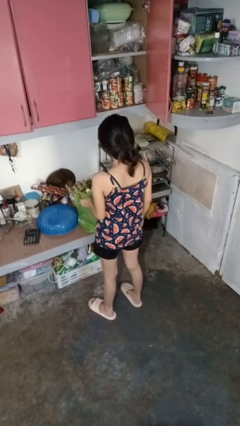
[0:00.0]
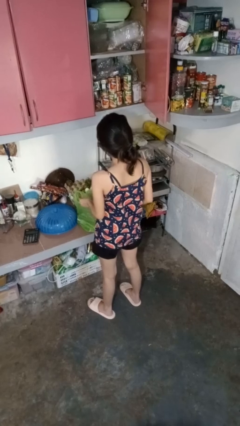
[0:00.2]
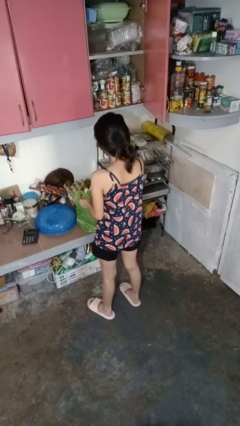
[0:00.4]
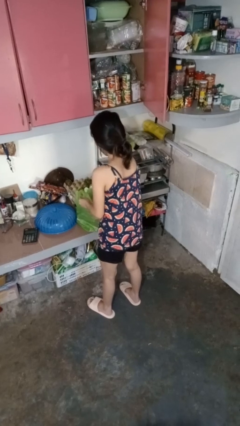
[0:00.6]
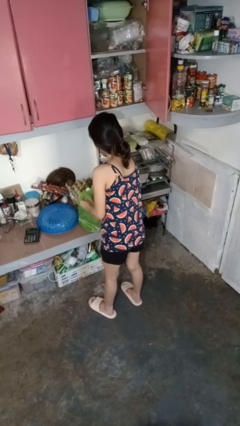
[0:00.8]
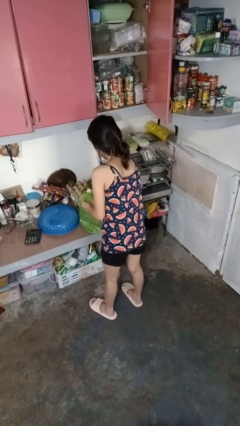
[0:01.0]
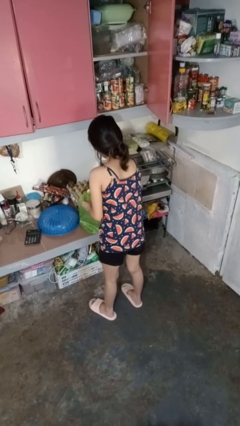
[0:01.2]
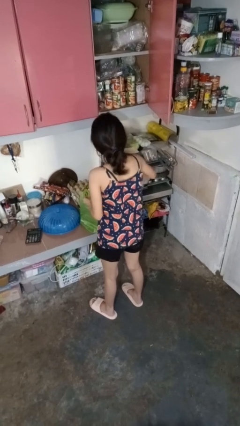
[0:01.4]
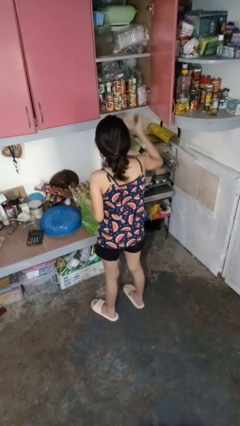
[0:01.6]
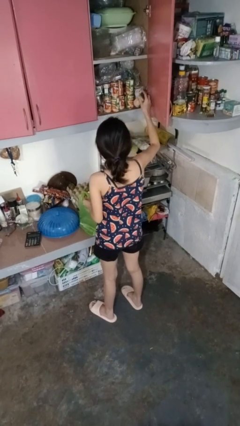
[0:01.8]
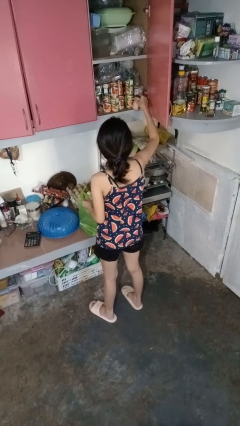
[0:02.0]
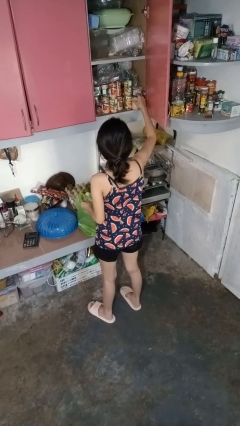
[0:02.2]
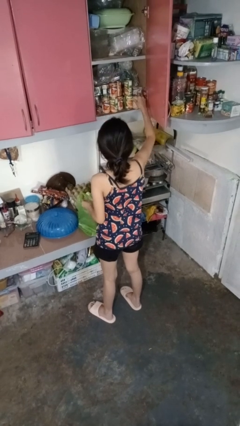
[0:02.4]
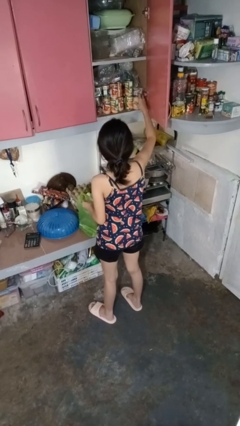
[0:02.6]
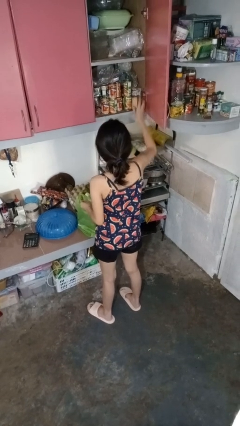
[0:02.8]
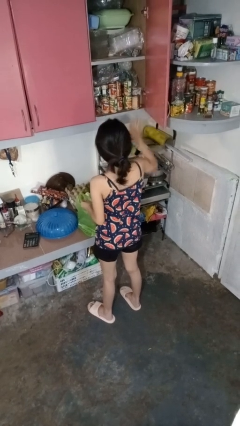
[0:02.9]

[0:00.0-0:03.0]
person loads groceries into cabinet

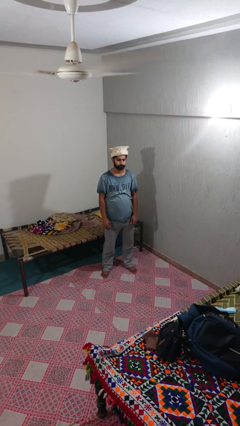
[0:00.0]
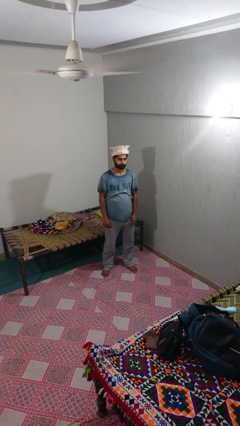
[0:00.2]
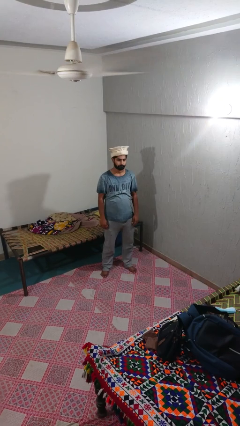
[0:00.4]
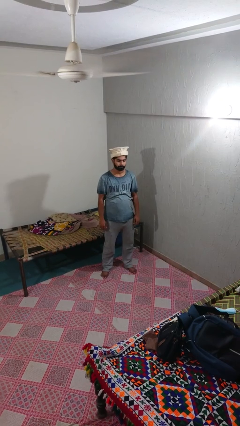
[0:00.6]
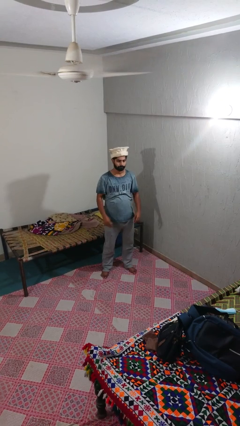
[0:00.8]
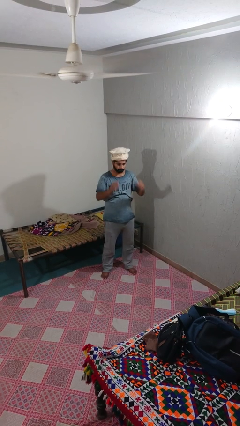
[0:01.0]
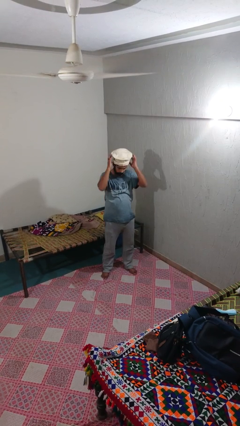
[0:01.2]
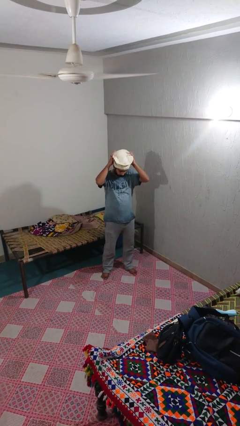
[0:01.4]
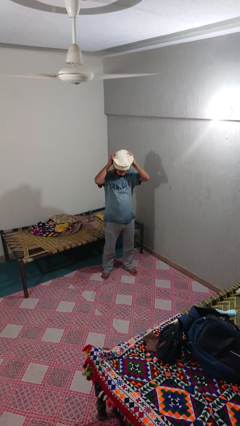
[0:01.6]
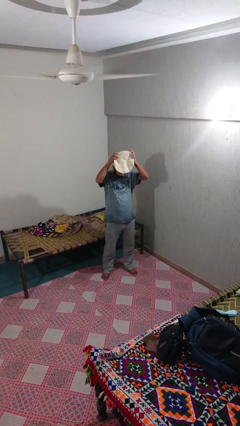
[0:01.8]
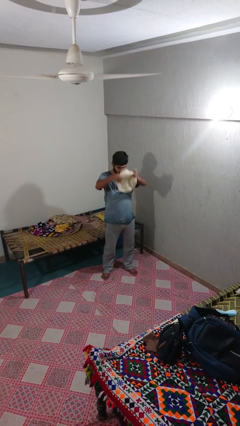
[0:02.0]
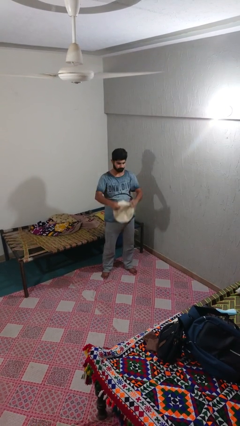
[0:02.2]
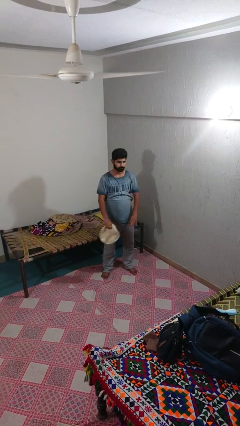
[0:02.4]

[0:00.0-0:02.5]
person takes off hat

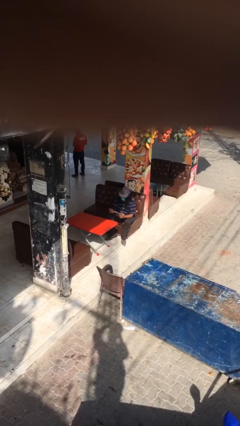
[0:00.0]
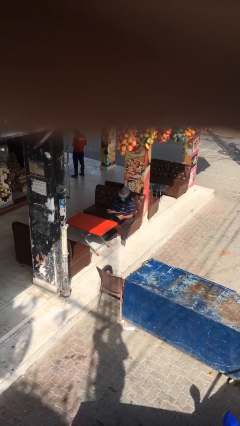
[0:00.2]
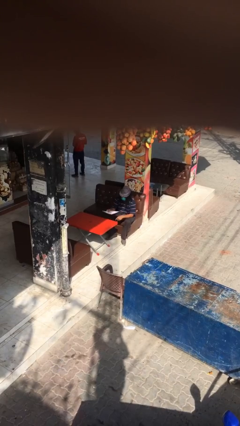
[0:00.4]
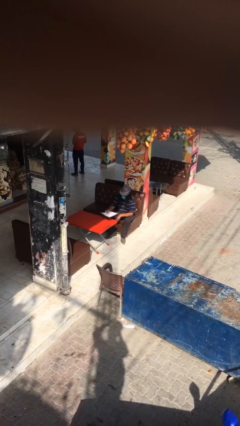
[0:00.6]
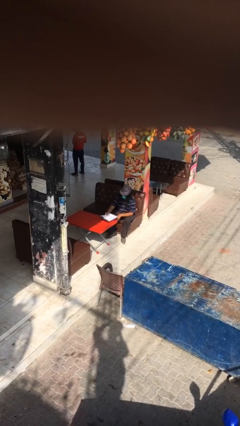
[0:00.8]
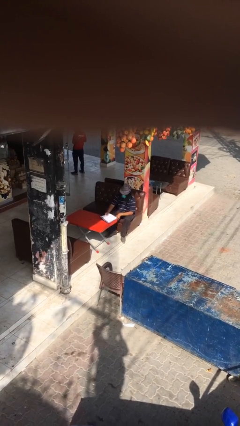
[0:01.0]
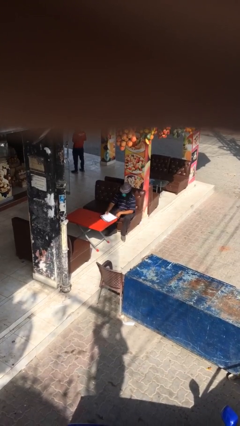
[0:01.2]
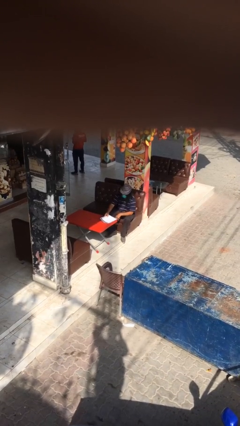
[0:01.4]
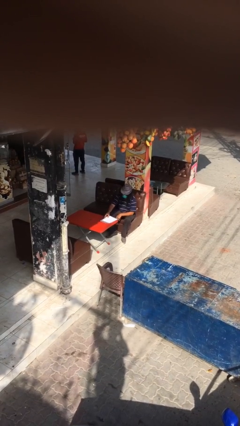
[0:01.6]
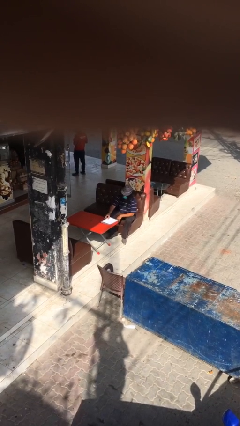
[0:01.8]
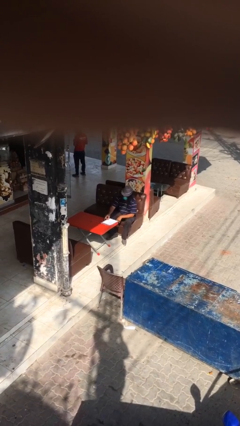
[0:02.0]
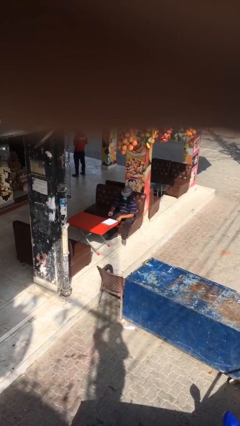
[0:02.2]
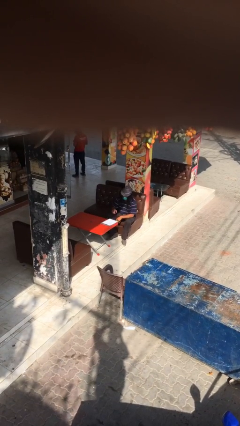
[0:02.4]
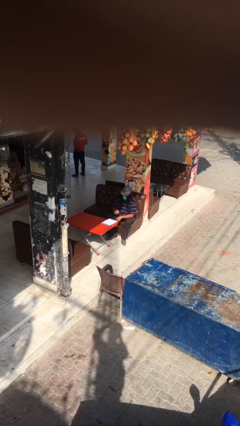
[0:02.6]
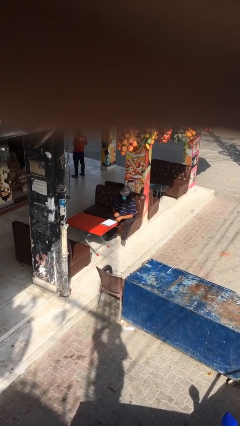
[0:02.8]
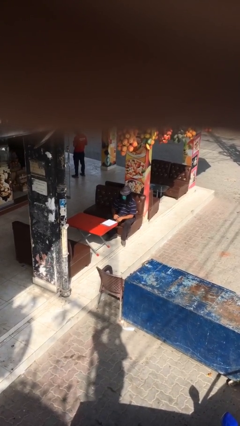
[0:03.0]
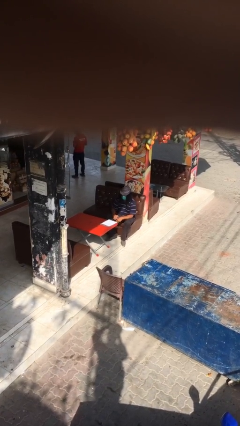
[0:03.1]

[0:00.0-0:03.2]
person puts down object on table

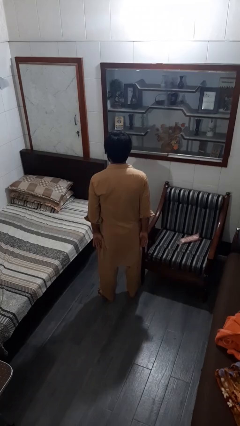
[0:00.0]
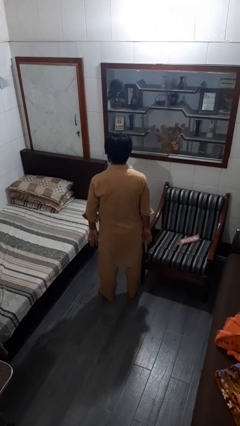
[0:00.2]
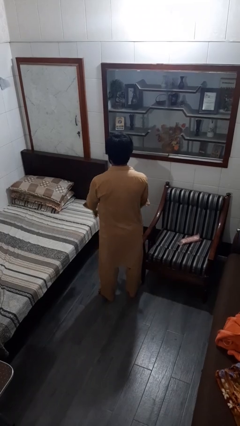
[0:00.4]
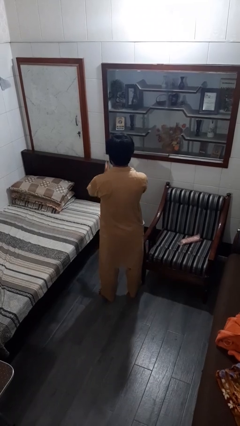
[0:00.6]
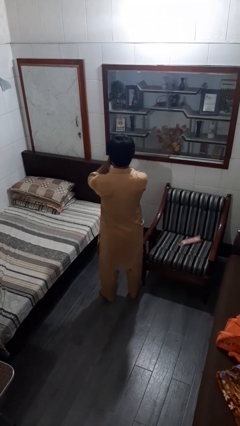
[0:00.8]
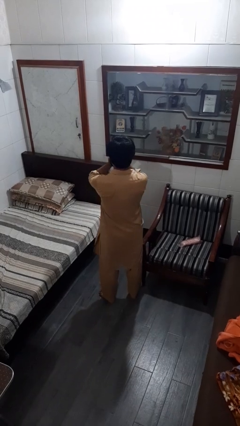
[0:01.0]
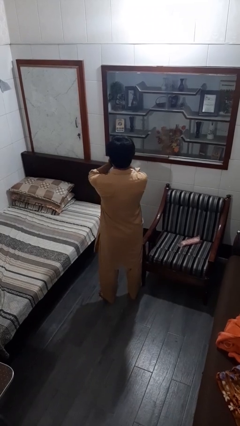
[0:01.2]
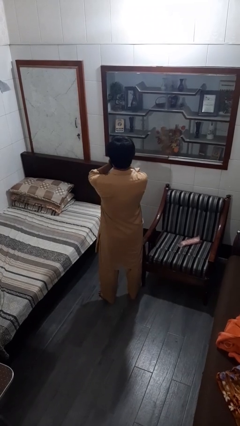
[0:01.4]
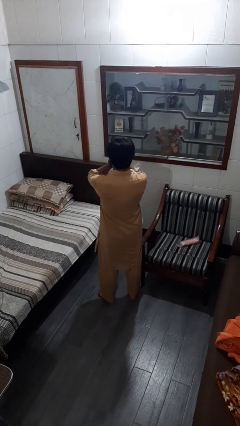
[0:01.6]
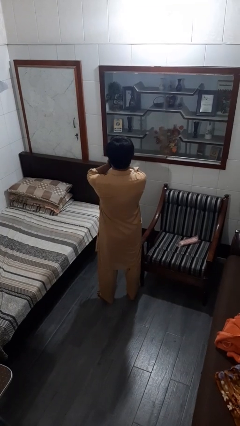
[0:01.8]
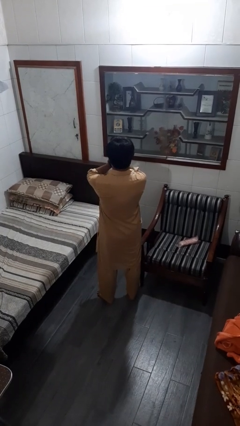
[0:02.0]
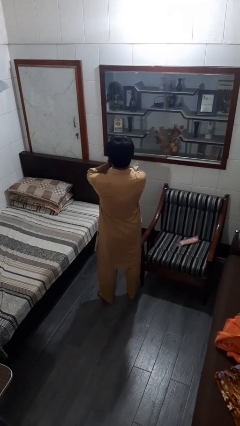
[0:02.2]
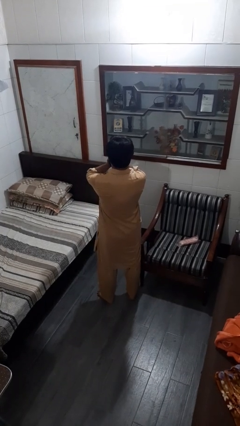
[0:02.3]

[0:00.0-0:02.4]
person covers face with hands

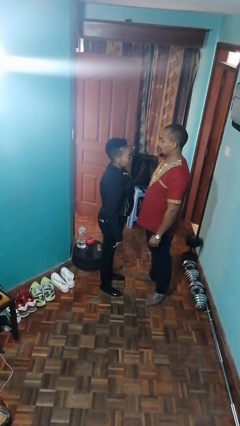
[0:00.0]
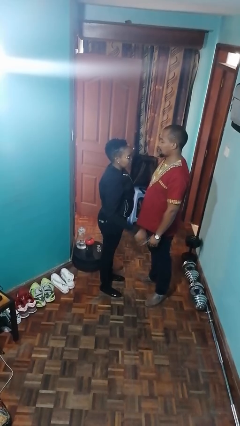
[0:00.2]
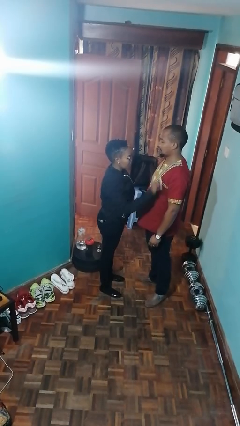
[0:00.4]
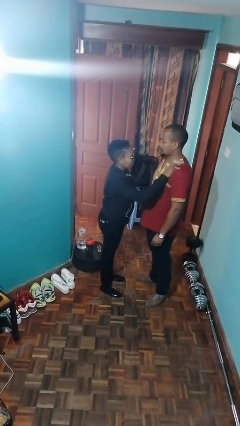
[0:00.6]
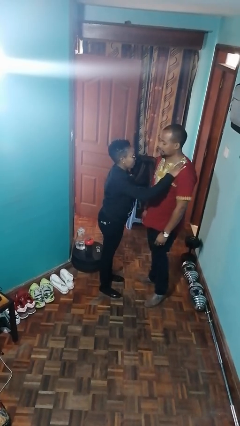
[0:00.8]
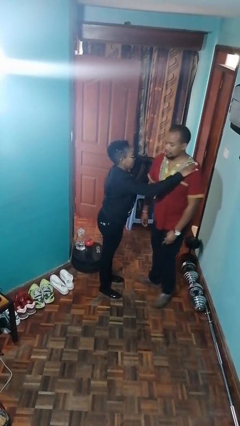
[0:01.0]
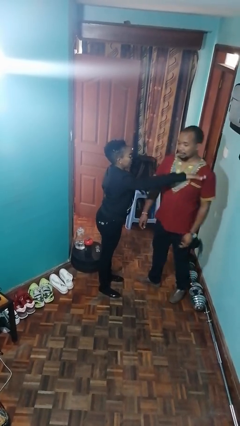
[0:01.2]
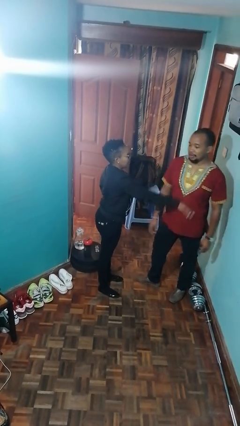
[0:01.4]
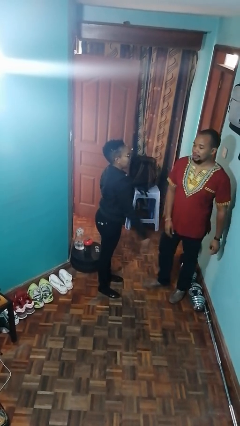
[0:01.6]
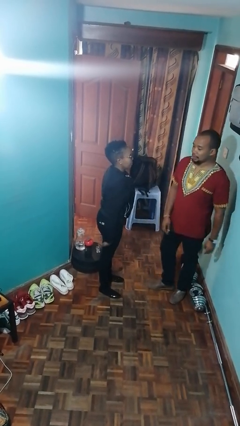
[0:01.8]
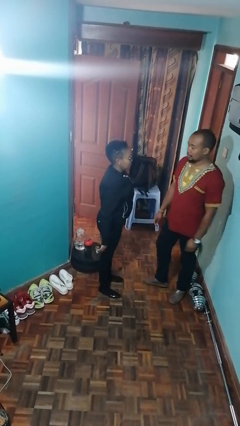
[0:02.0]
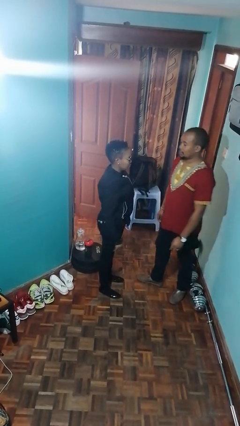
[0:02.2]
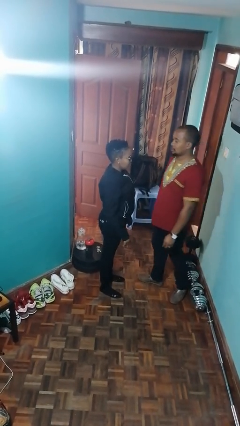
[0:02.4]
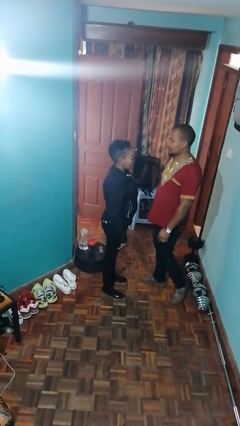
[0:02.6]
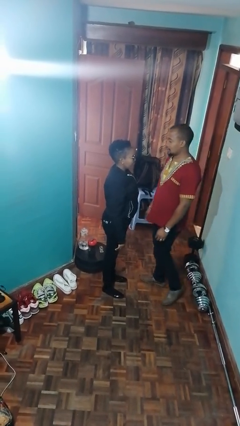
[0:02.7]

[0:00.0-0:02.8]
person shoves person

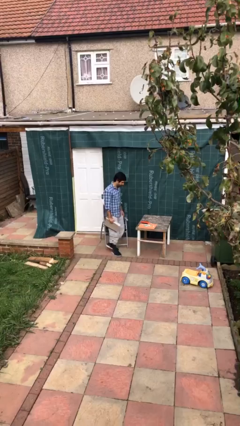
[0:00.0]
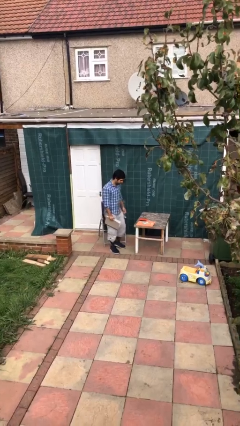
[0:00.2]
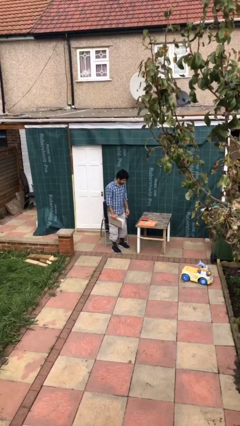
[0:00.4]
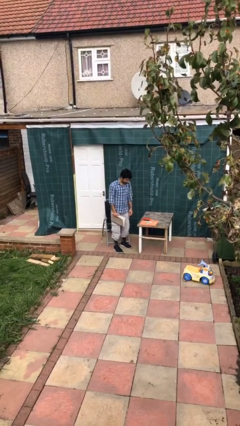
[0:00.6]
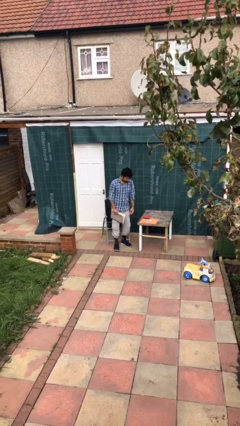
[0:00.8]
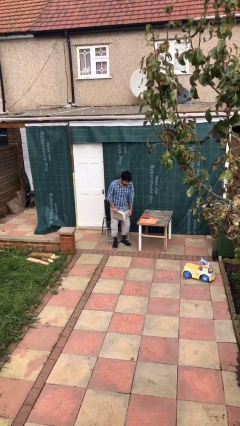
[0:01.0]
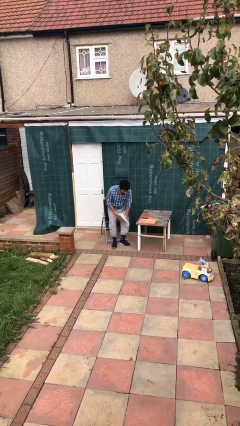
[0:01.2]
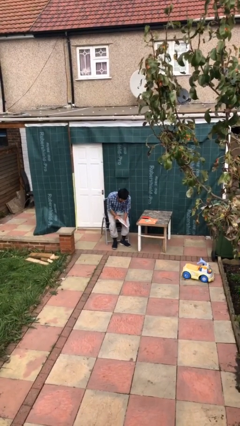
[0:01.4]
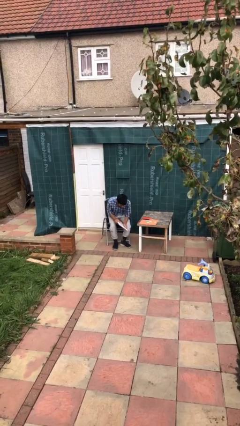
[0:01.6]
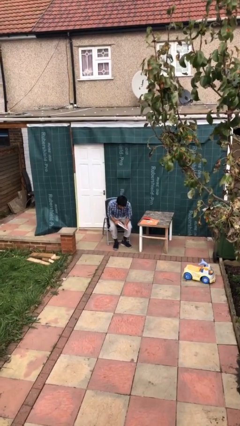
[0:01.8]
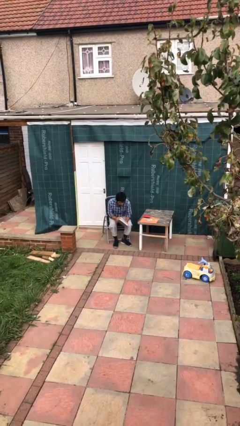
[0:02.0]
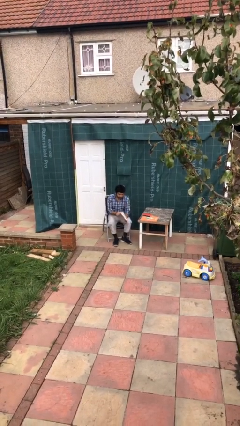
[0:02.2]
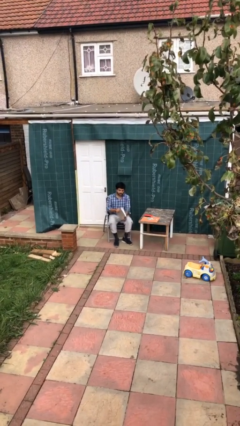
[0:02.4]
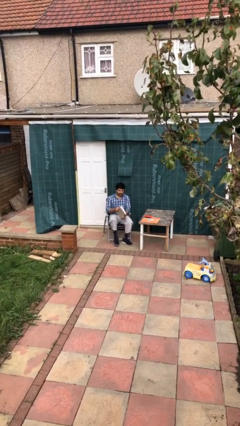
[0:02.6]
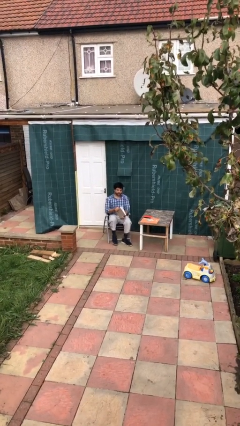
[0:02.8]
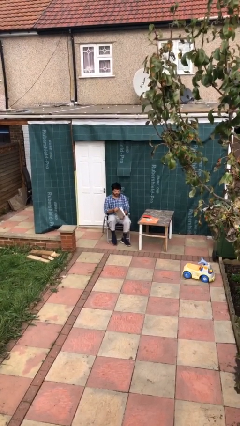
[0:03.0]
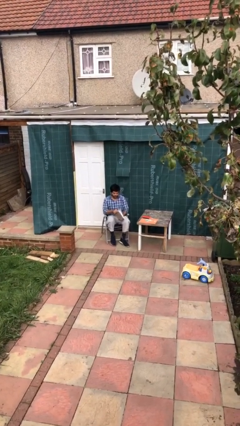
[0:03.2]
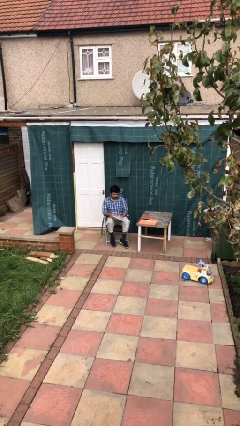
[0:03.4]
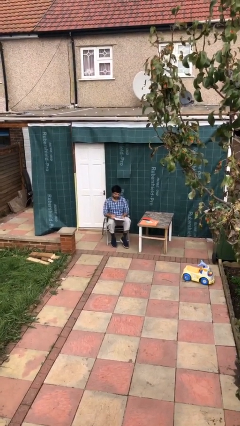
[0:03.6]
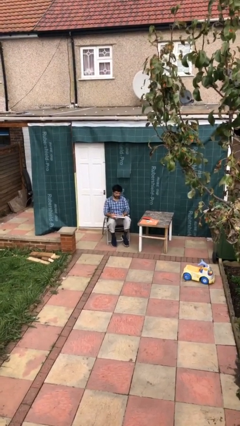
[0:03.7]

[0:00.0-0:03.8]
person sits down

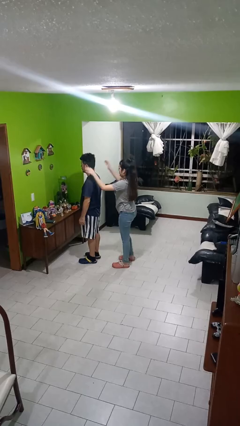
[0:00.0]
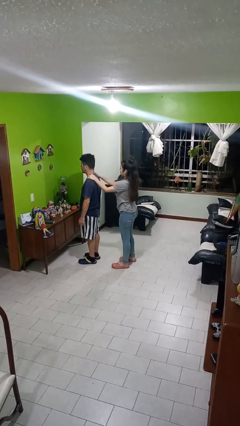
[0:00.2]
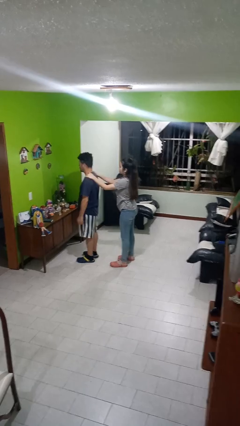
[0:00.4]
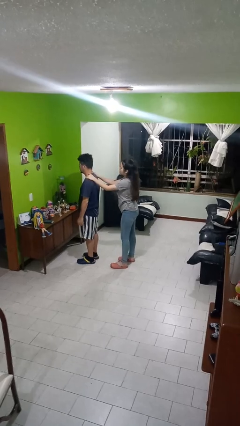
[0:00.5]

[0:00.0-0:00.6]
person grabs person by shoulder
